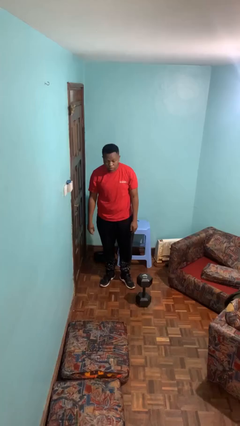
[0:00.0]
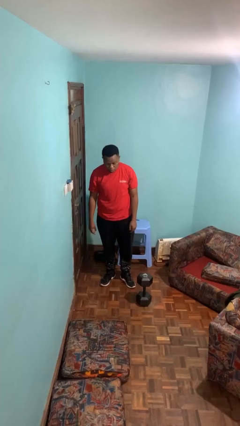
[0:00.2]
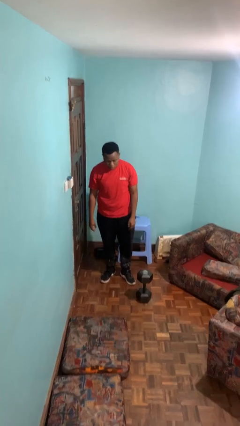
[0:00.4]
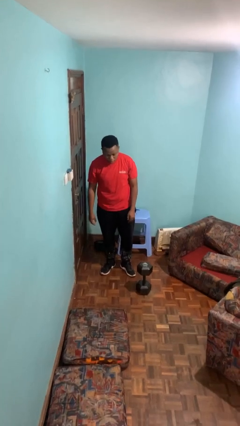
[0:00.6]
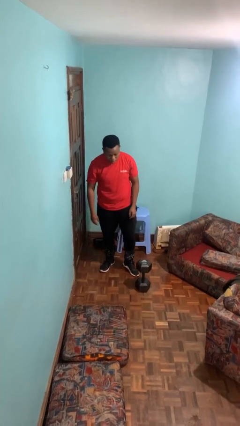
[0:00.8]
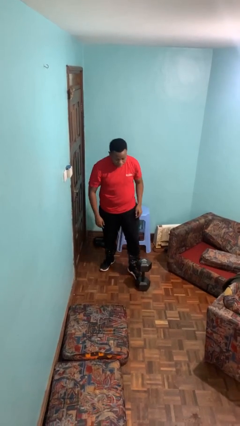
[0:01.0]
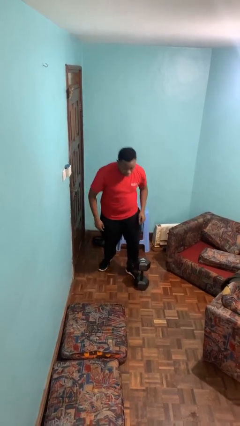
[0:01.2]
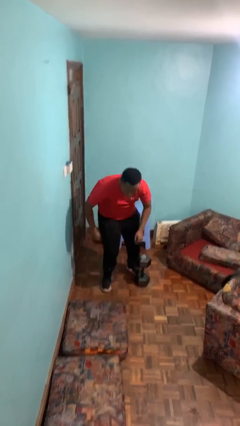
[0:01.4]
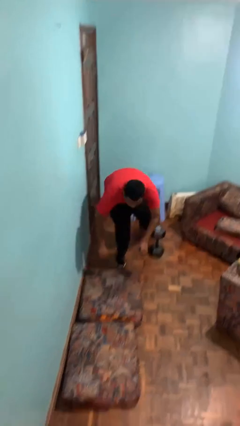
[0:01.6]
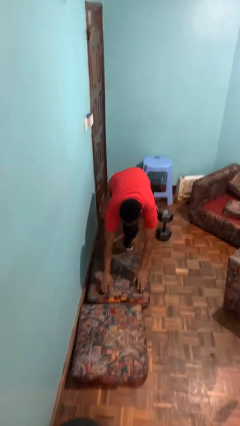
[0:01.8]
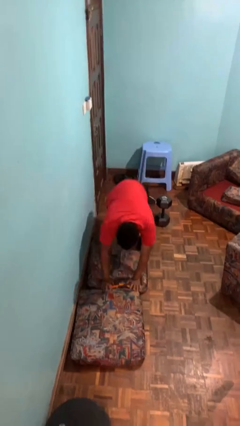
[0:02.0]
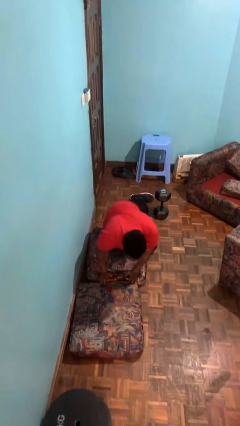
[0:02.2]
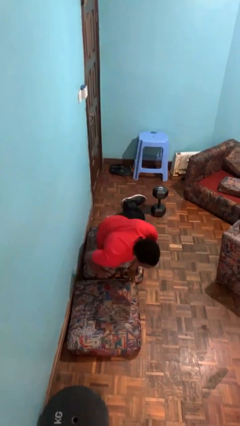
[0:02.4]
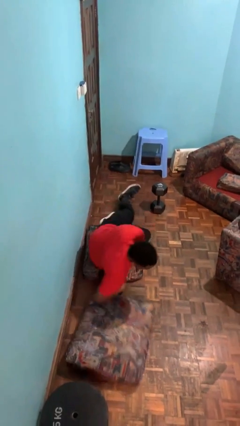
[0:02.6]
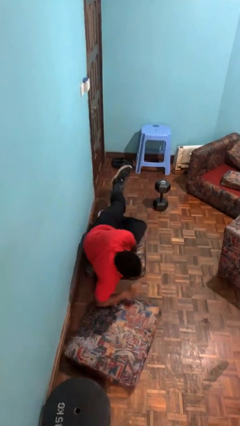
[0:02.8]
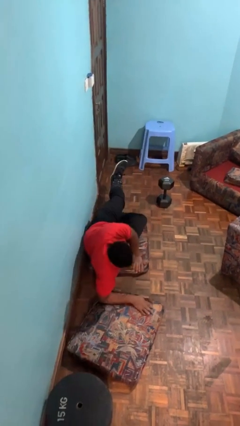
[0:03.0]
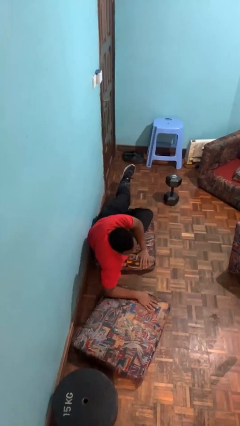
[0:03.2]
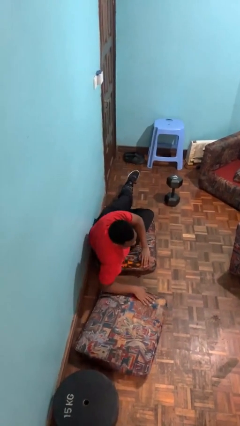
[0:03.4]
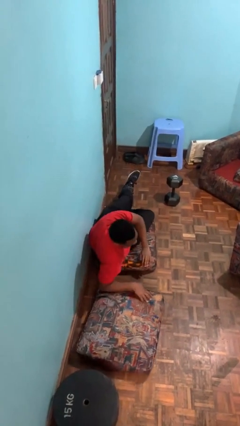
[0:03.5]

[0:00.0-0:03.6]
person trips on object on floor

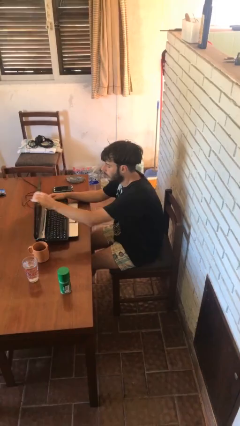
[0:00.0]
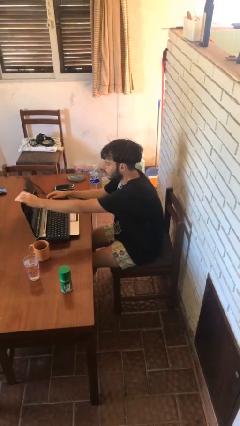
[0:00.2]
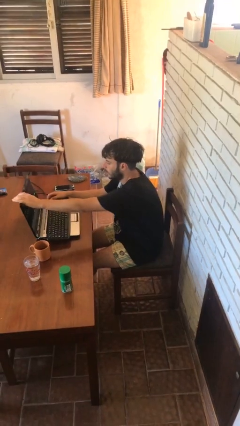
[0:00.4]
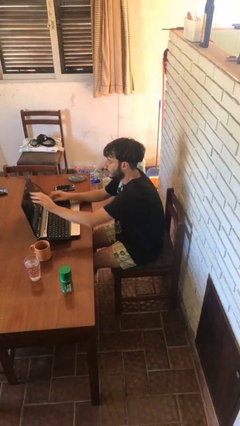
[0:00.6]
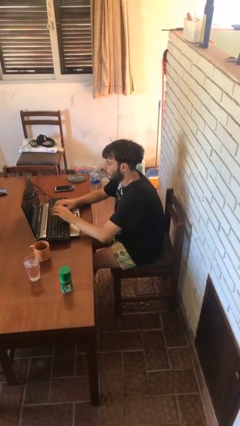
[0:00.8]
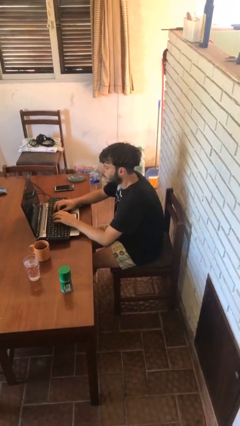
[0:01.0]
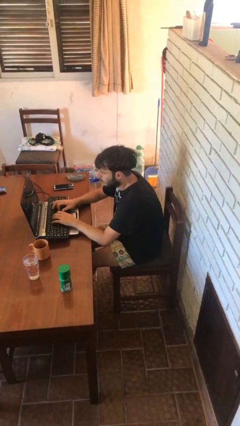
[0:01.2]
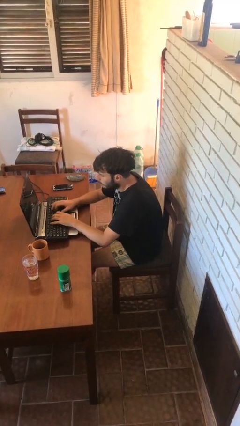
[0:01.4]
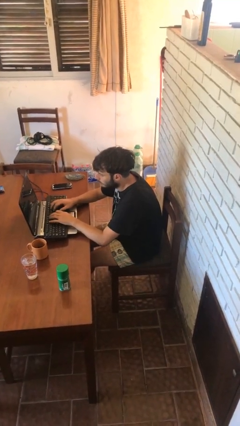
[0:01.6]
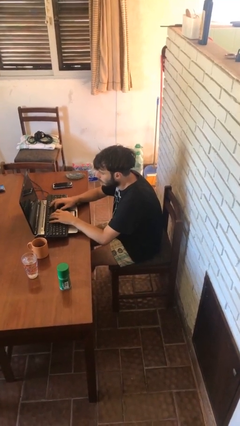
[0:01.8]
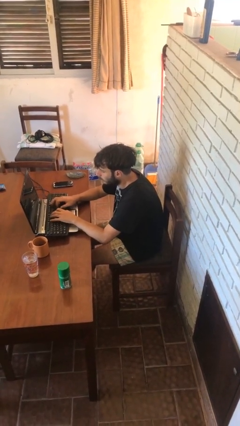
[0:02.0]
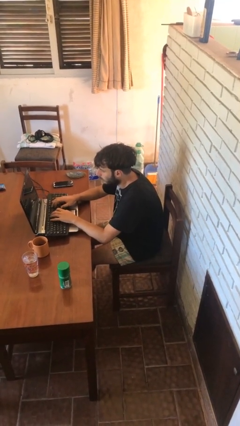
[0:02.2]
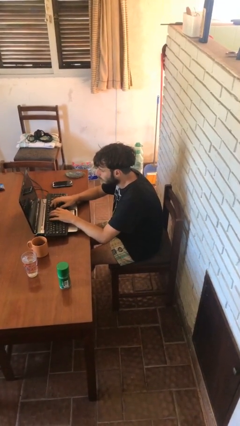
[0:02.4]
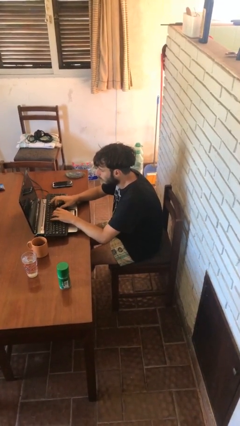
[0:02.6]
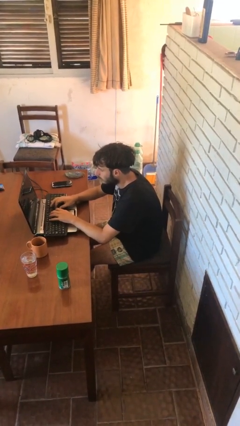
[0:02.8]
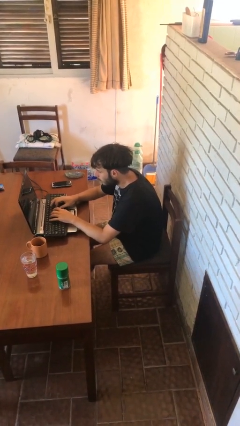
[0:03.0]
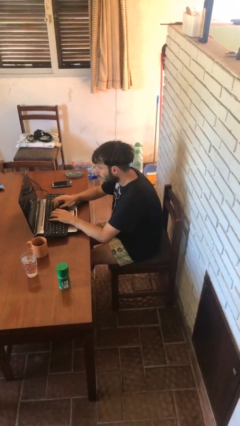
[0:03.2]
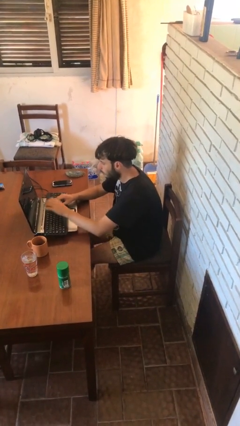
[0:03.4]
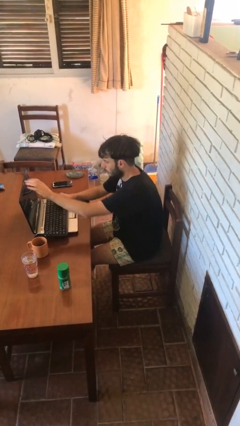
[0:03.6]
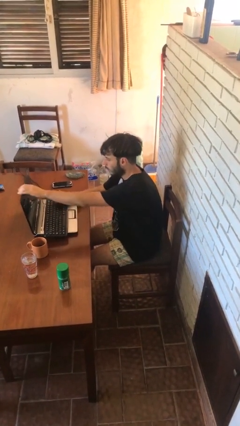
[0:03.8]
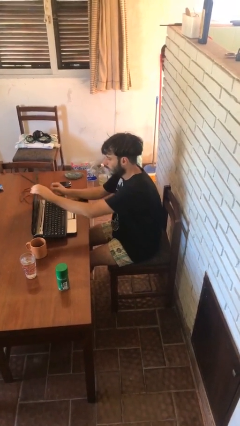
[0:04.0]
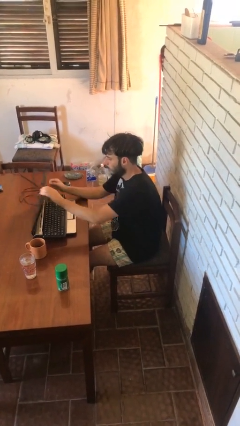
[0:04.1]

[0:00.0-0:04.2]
person interacts with laptop

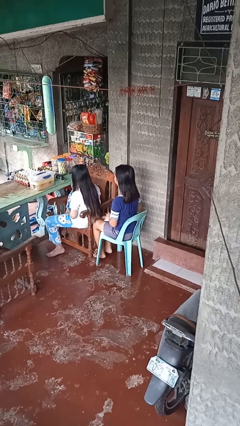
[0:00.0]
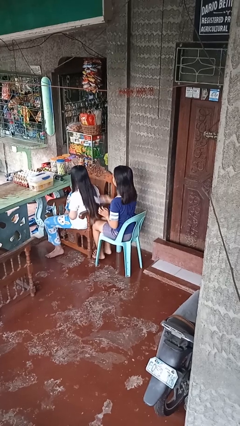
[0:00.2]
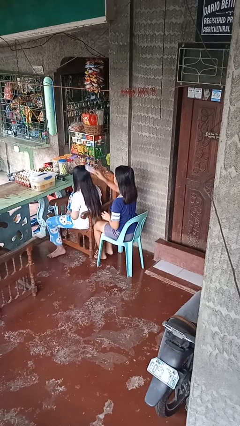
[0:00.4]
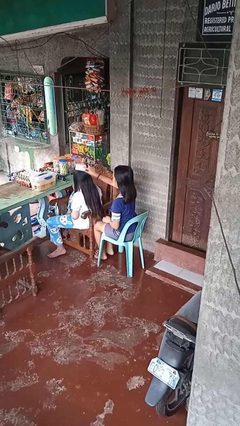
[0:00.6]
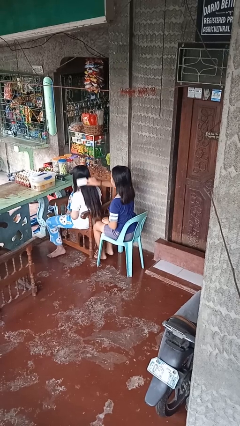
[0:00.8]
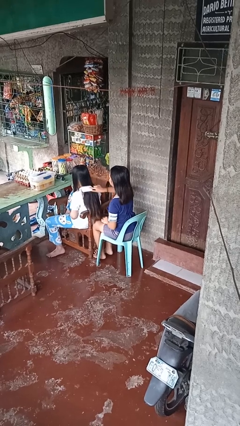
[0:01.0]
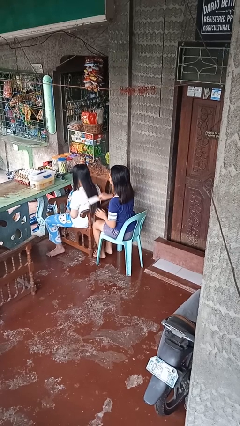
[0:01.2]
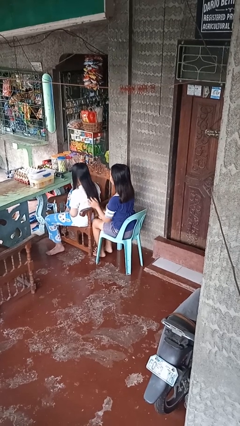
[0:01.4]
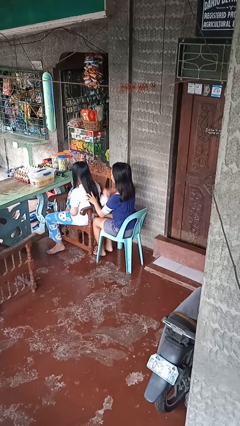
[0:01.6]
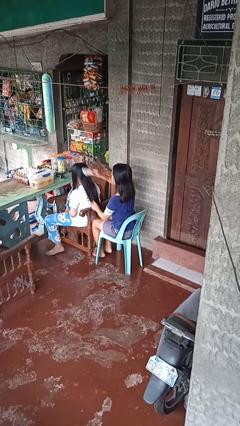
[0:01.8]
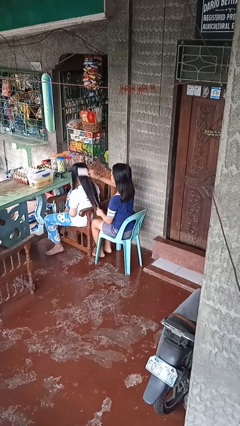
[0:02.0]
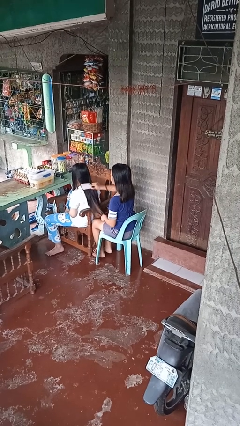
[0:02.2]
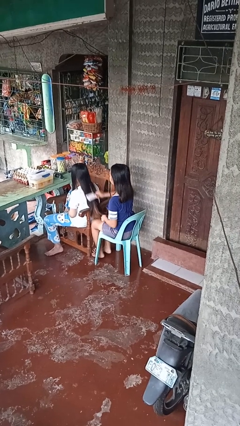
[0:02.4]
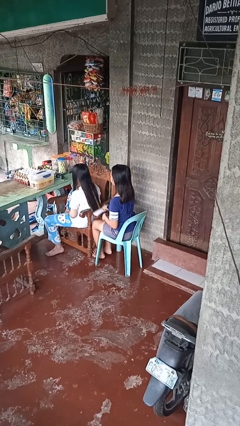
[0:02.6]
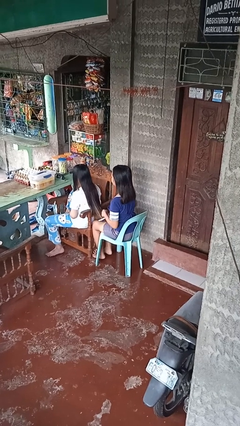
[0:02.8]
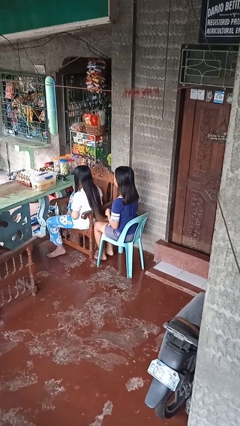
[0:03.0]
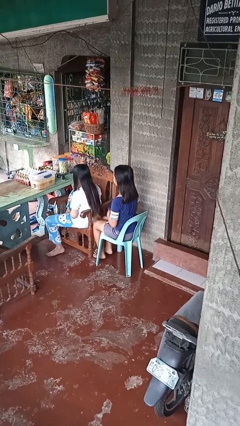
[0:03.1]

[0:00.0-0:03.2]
person brushes hair of person

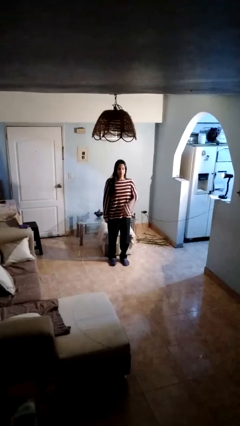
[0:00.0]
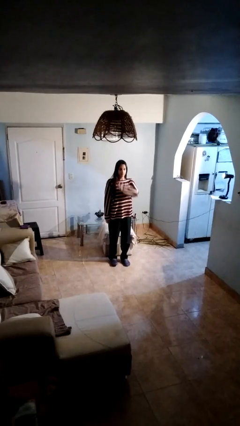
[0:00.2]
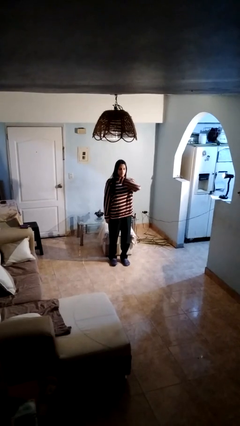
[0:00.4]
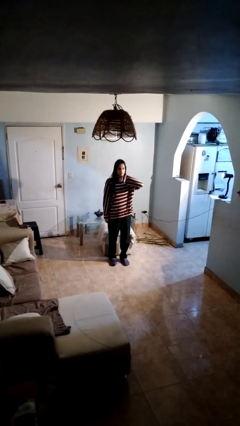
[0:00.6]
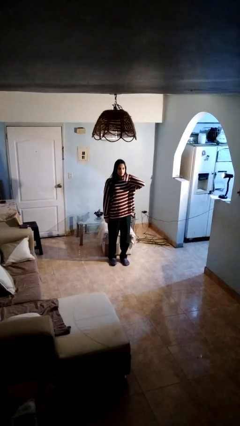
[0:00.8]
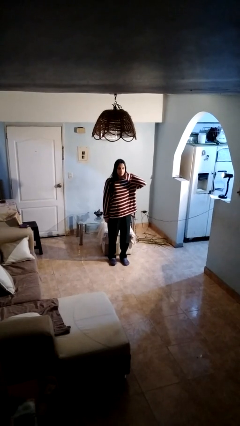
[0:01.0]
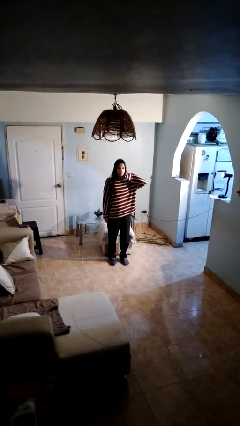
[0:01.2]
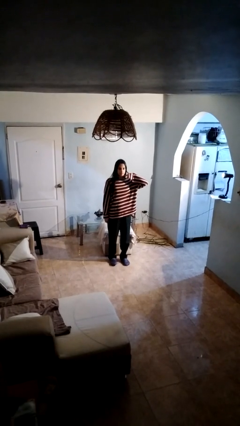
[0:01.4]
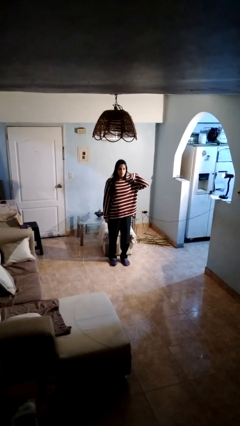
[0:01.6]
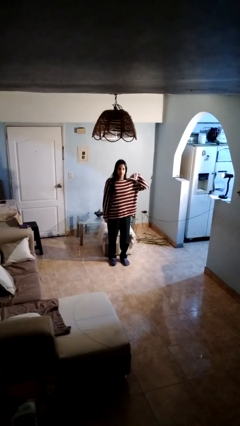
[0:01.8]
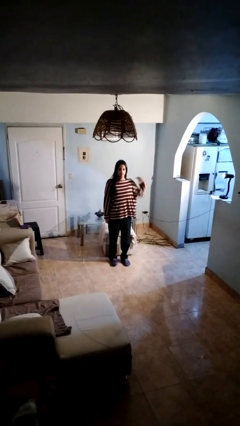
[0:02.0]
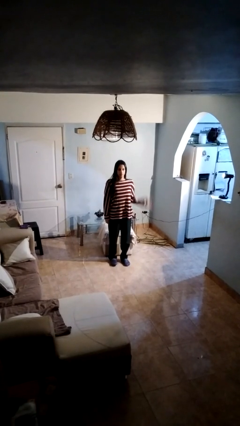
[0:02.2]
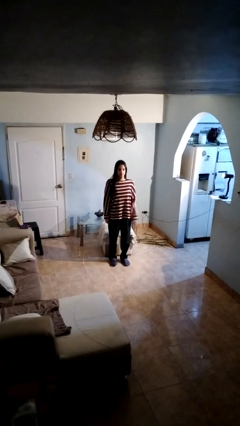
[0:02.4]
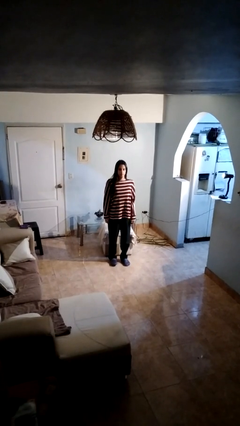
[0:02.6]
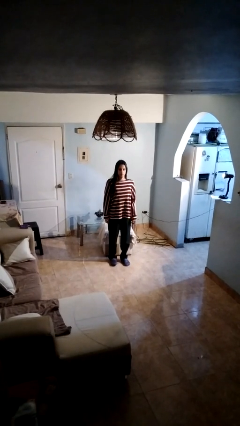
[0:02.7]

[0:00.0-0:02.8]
person gestures cut

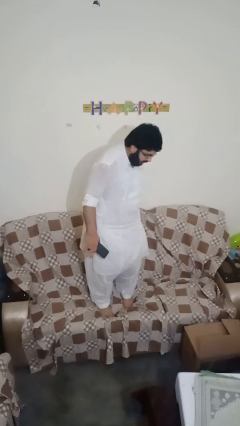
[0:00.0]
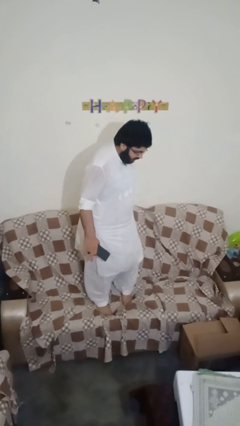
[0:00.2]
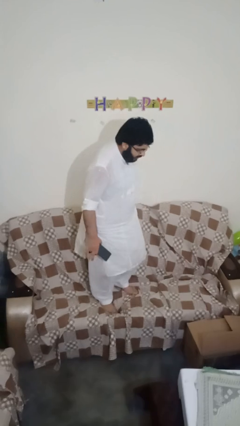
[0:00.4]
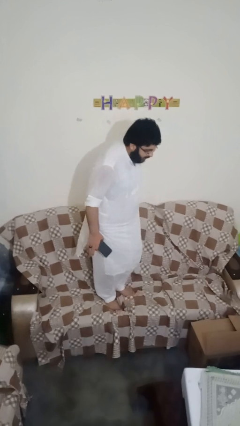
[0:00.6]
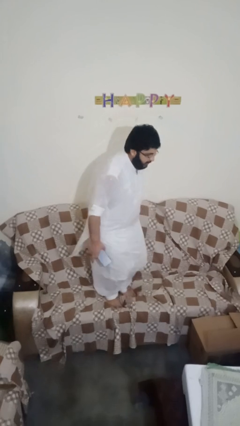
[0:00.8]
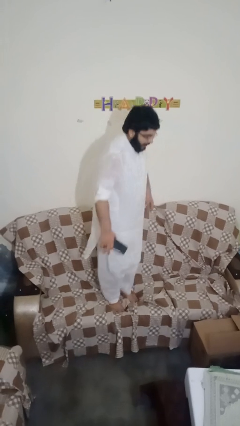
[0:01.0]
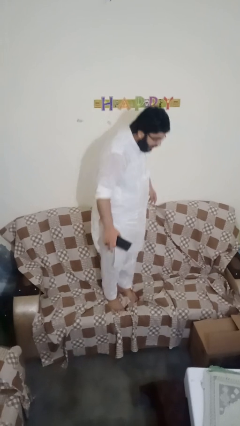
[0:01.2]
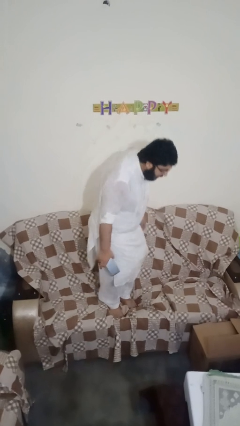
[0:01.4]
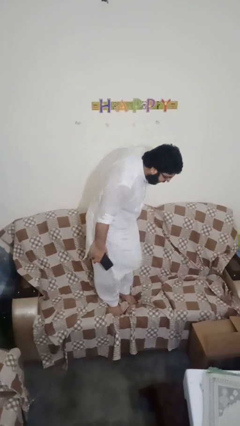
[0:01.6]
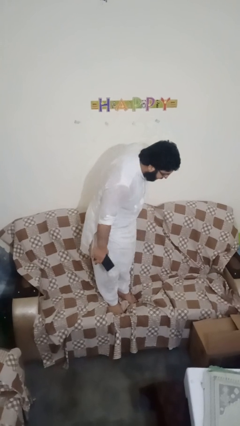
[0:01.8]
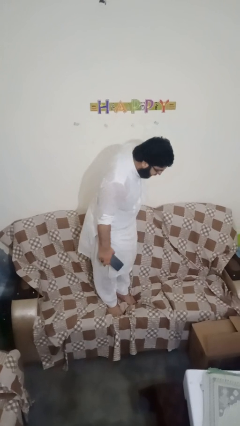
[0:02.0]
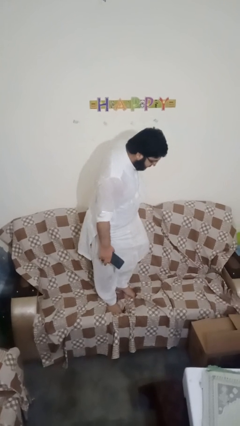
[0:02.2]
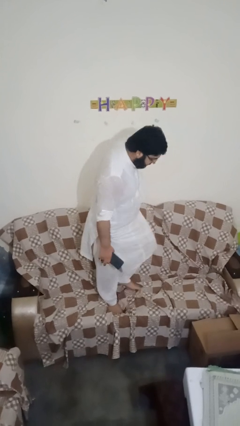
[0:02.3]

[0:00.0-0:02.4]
person jumps on couch

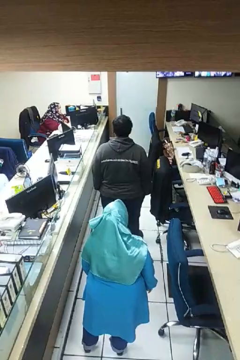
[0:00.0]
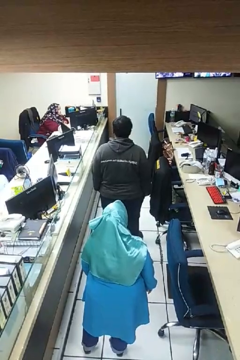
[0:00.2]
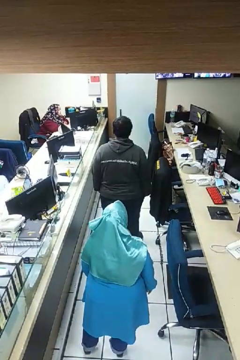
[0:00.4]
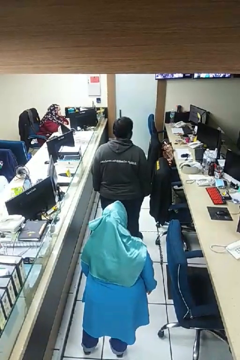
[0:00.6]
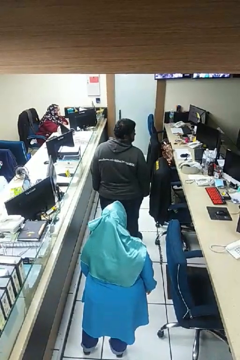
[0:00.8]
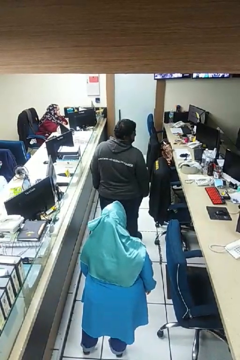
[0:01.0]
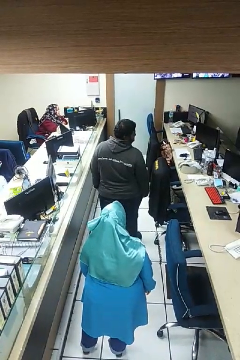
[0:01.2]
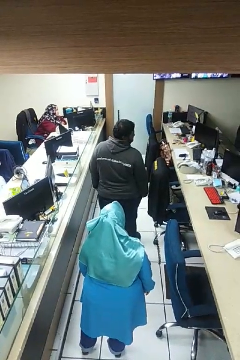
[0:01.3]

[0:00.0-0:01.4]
person looks over shoulder
